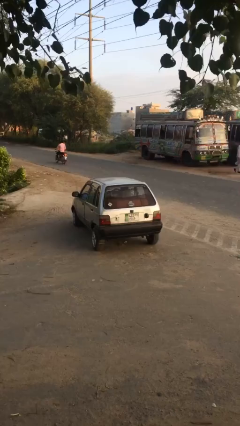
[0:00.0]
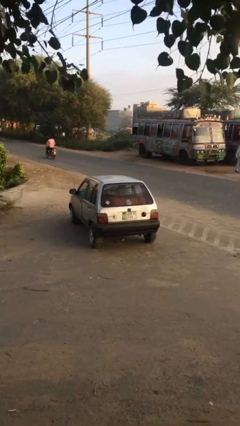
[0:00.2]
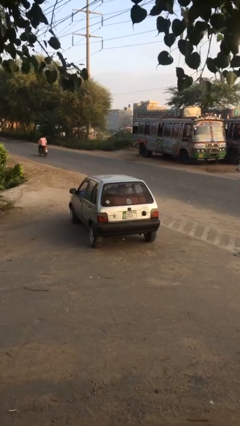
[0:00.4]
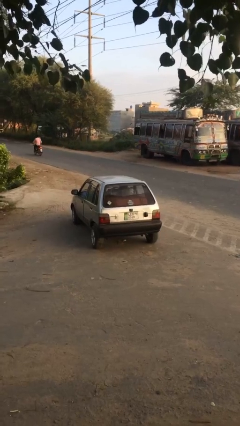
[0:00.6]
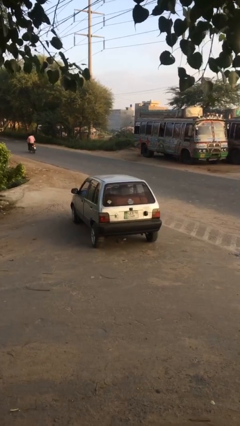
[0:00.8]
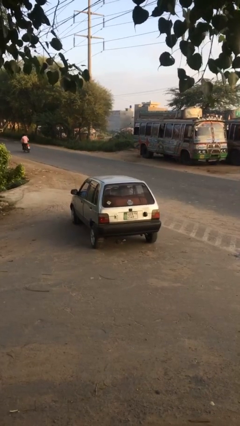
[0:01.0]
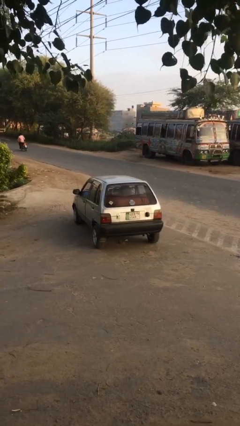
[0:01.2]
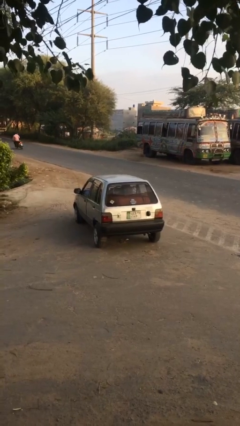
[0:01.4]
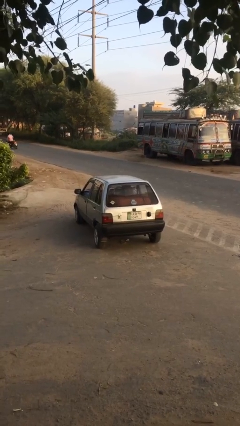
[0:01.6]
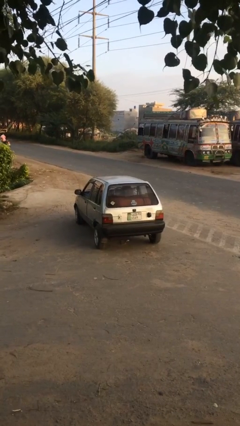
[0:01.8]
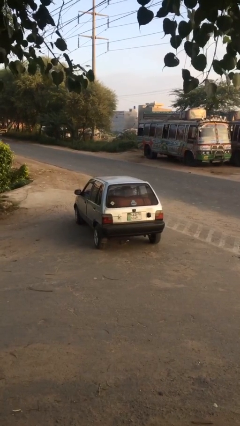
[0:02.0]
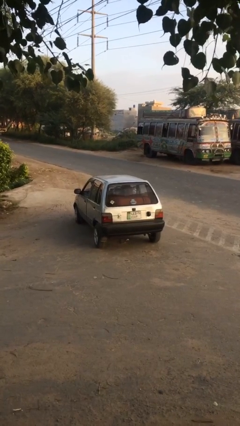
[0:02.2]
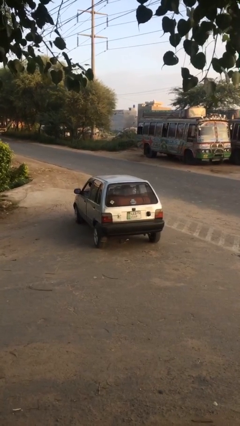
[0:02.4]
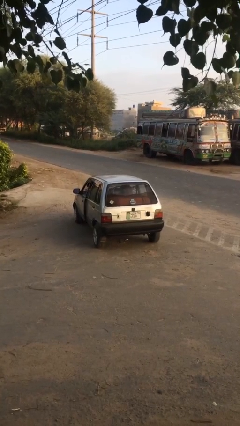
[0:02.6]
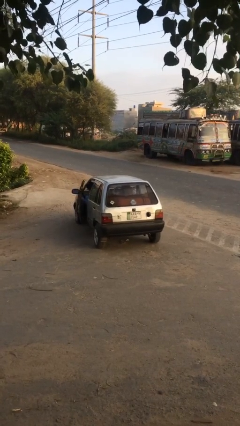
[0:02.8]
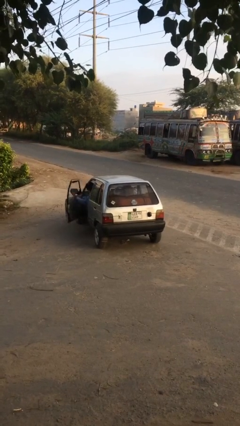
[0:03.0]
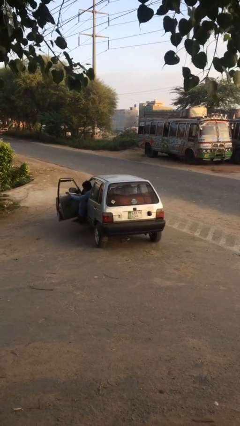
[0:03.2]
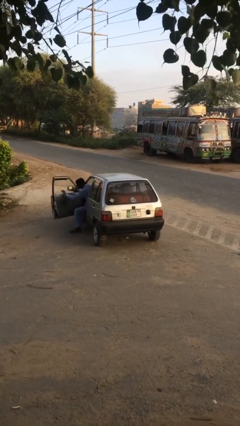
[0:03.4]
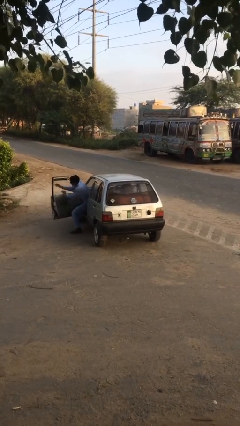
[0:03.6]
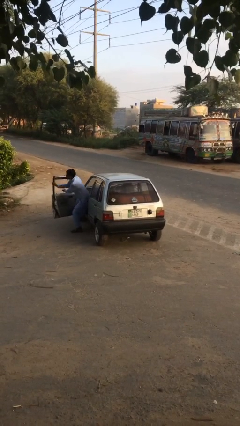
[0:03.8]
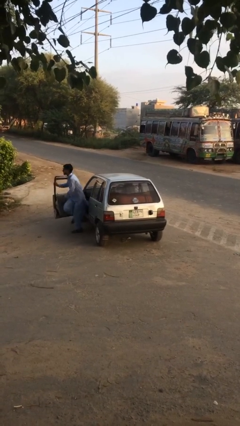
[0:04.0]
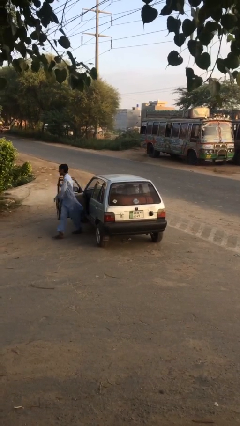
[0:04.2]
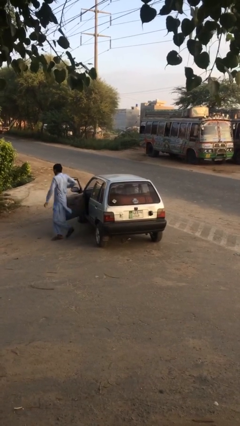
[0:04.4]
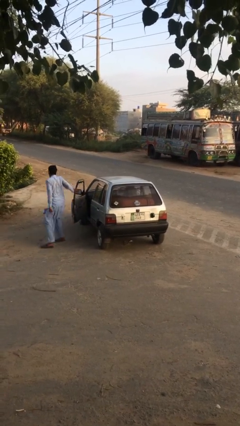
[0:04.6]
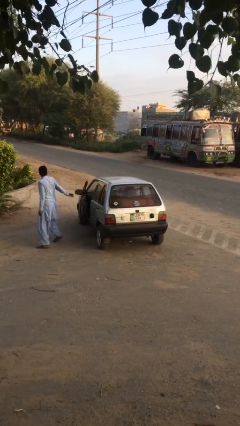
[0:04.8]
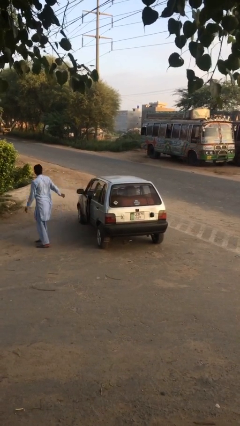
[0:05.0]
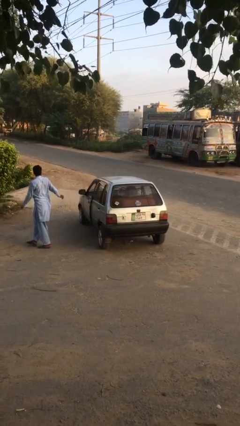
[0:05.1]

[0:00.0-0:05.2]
car drops off person

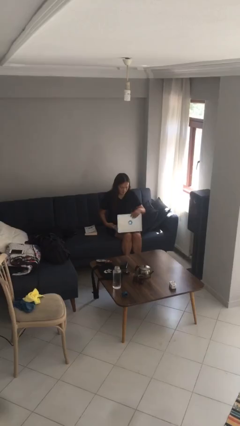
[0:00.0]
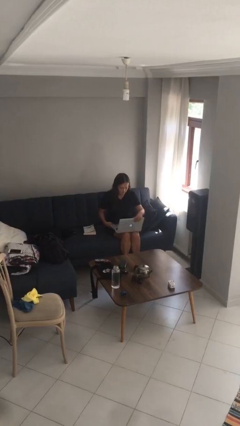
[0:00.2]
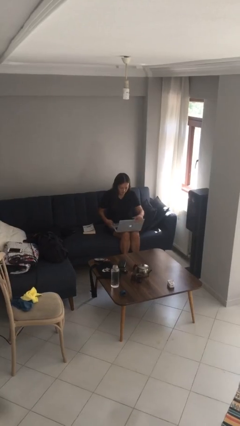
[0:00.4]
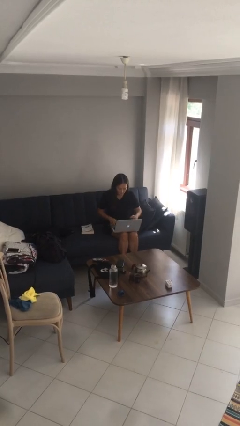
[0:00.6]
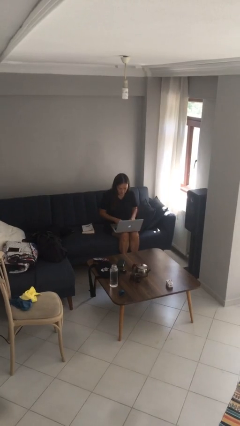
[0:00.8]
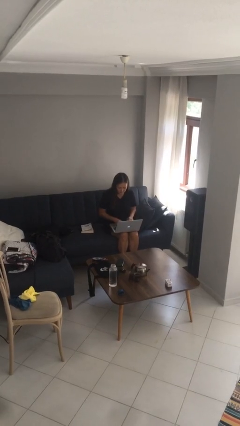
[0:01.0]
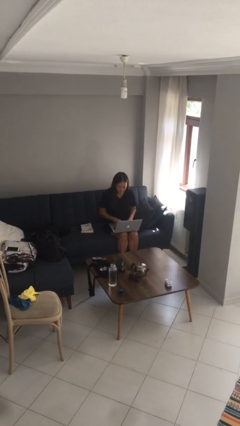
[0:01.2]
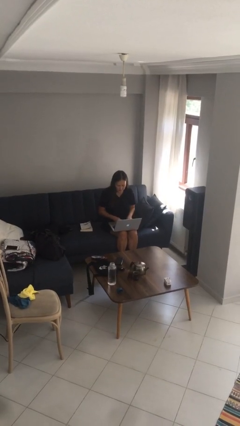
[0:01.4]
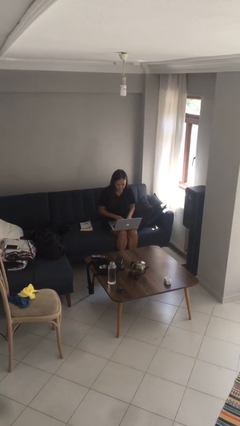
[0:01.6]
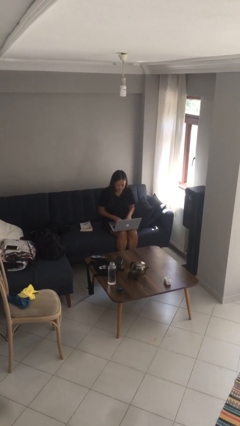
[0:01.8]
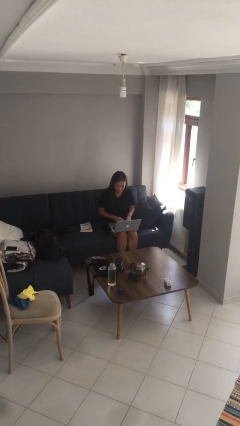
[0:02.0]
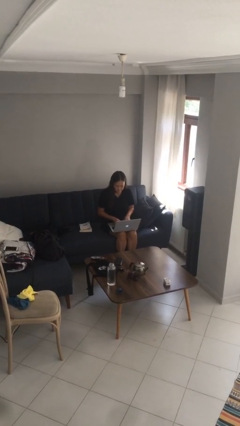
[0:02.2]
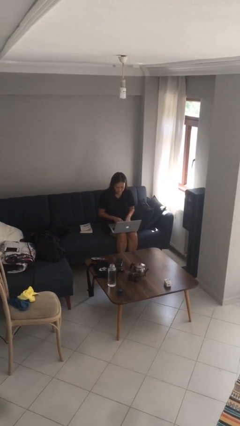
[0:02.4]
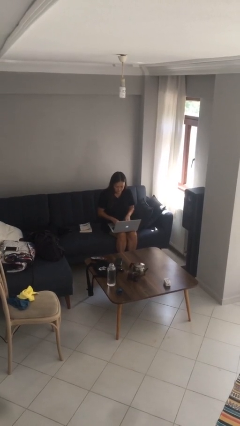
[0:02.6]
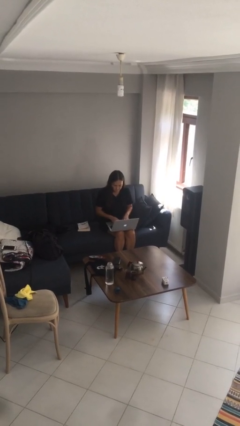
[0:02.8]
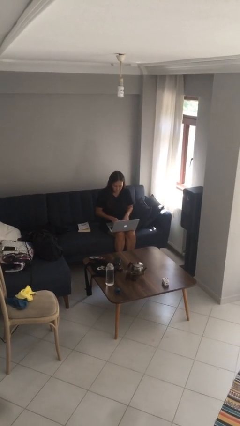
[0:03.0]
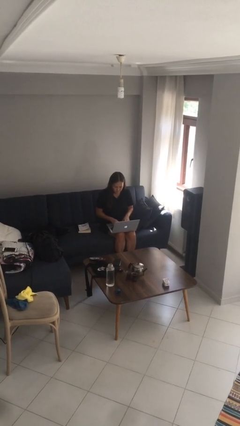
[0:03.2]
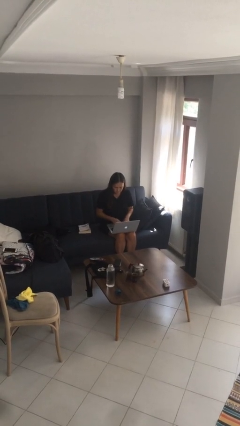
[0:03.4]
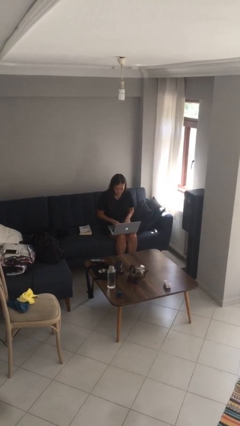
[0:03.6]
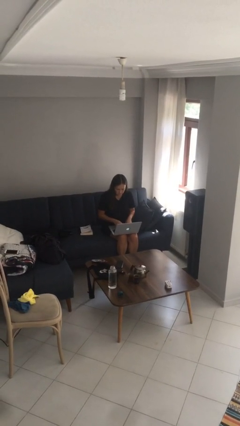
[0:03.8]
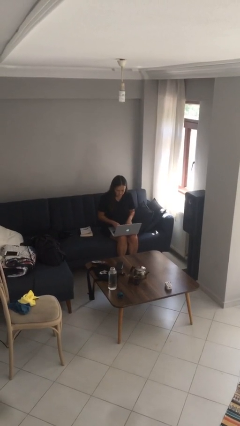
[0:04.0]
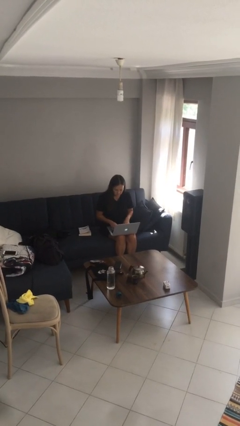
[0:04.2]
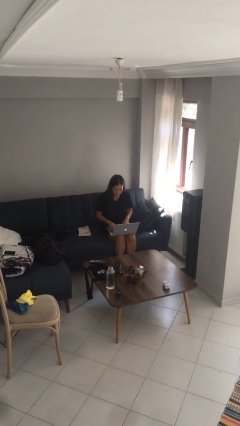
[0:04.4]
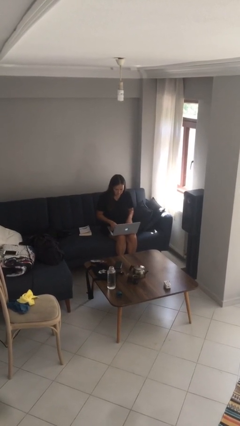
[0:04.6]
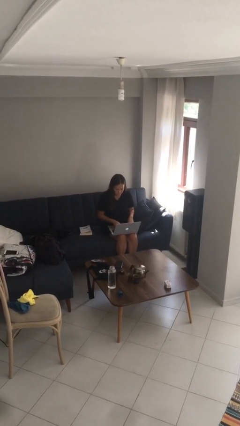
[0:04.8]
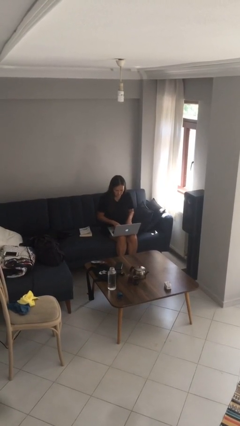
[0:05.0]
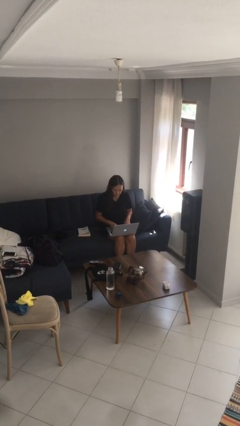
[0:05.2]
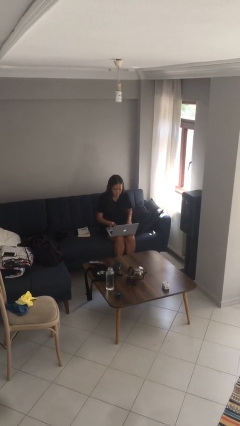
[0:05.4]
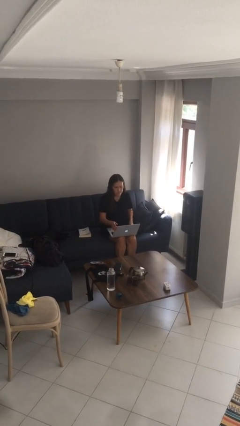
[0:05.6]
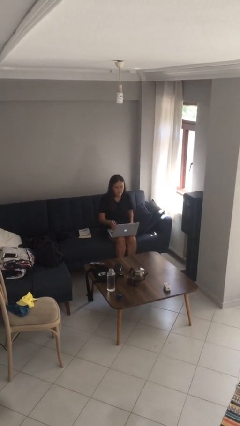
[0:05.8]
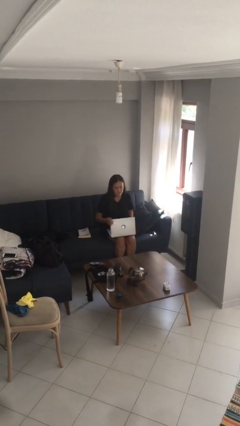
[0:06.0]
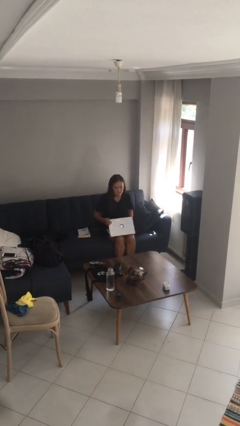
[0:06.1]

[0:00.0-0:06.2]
person interacts with laptop

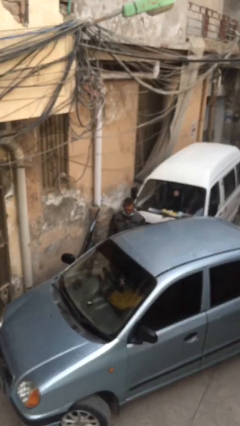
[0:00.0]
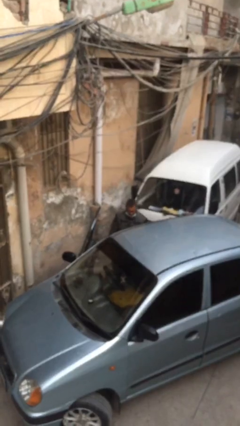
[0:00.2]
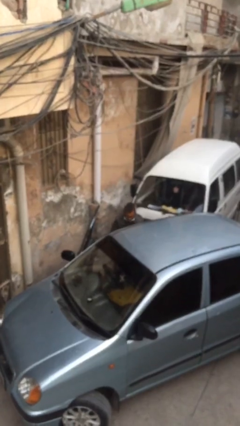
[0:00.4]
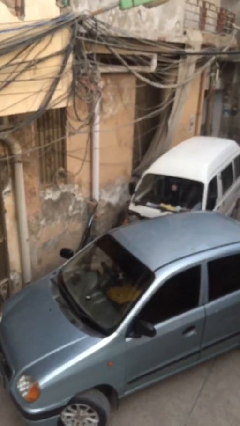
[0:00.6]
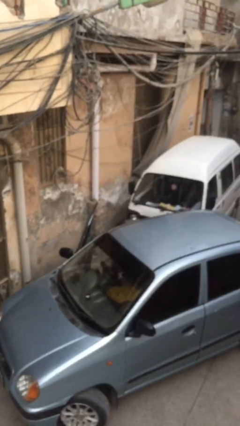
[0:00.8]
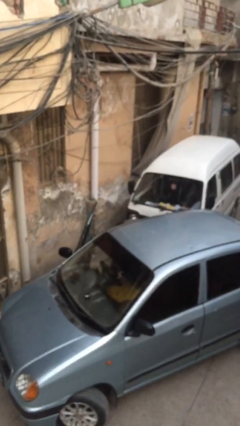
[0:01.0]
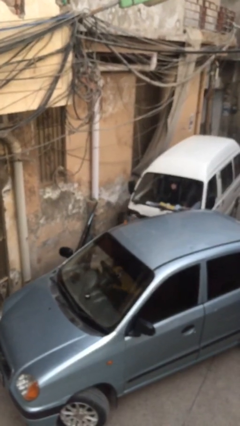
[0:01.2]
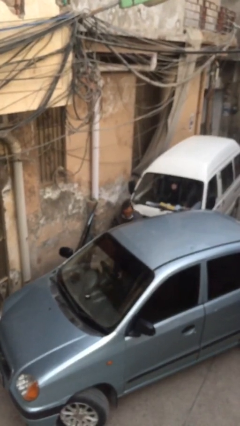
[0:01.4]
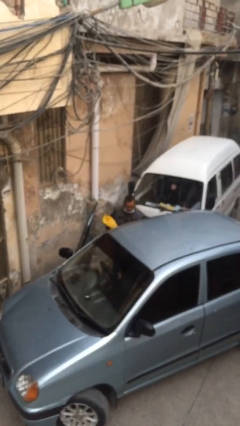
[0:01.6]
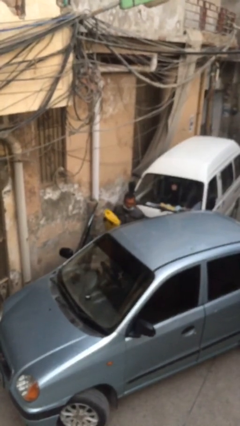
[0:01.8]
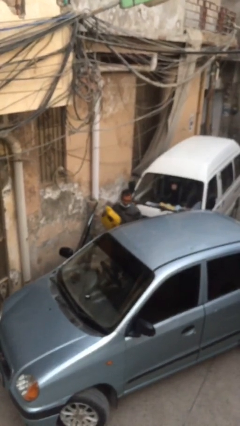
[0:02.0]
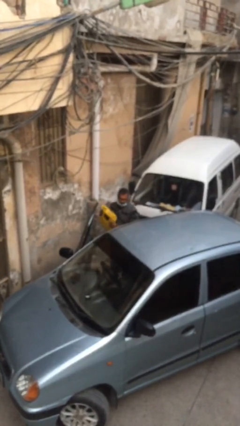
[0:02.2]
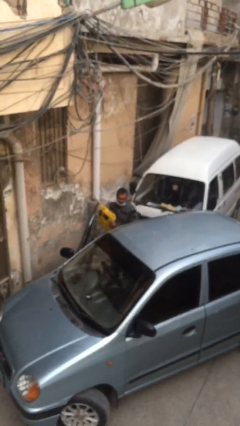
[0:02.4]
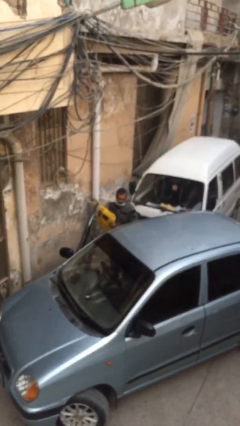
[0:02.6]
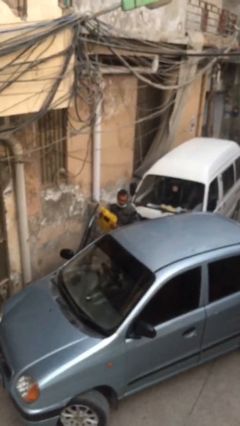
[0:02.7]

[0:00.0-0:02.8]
person unloads car

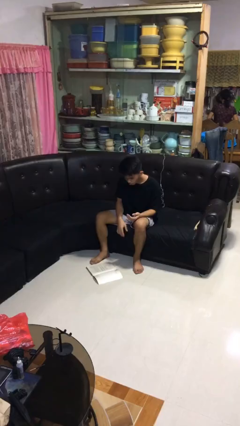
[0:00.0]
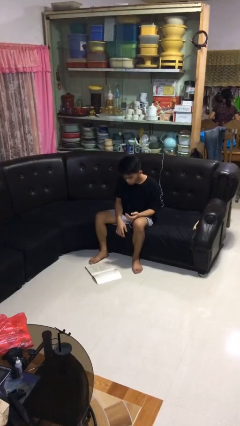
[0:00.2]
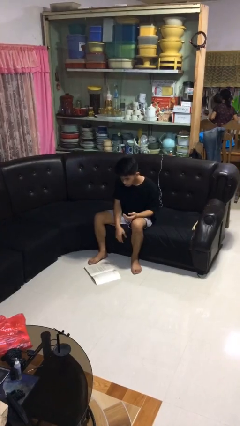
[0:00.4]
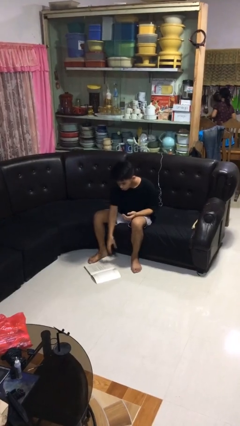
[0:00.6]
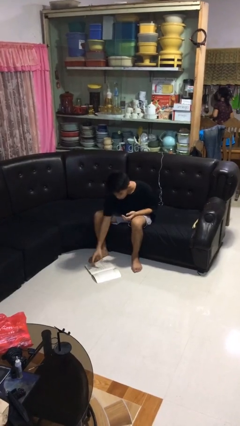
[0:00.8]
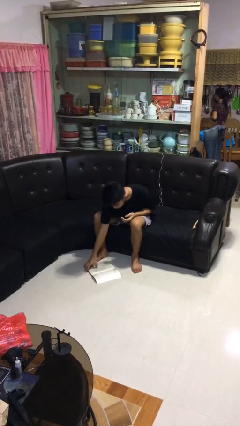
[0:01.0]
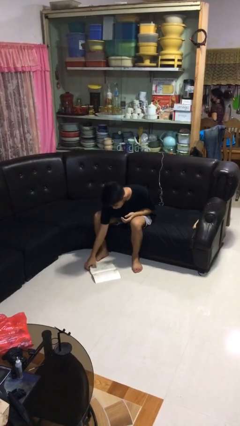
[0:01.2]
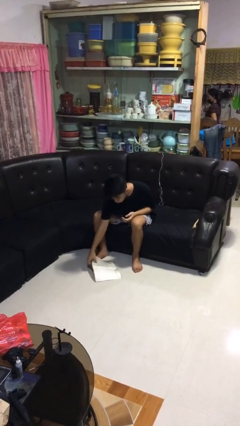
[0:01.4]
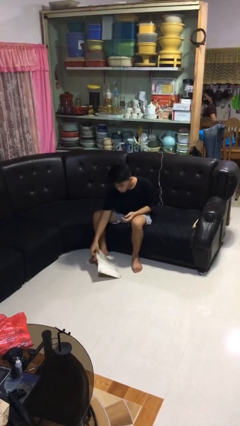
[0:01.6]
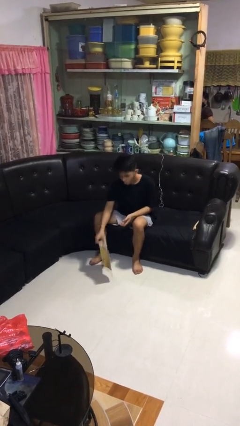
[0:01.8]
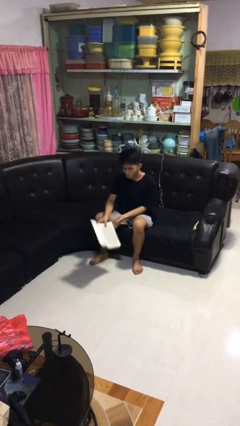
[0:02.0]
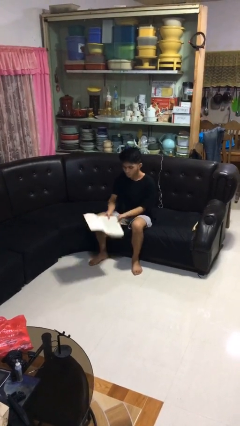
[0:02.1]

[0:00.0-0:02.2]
person picks up object from floor

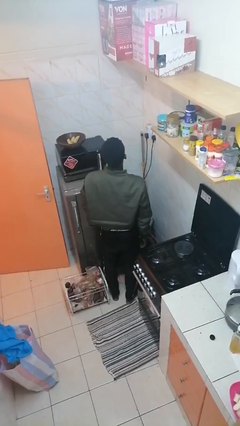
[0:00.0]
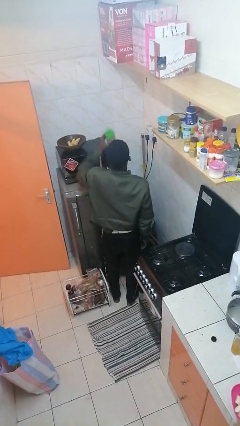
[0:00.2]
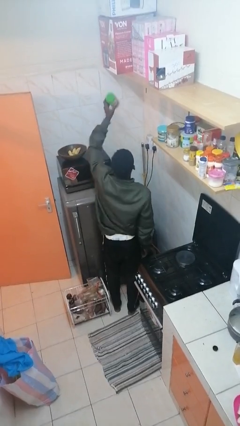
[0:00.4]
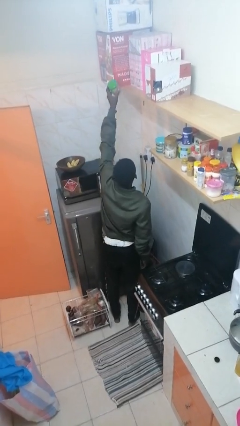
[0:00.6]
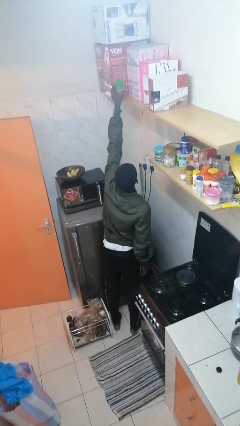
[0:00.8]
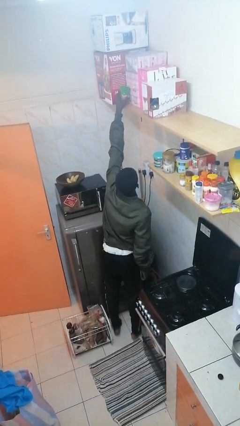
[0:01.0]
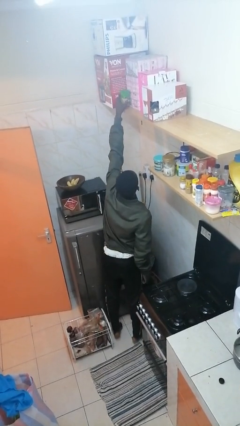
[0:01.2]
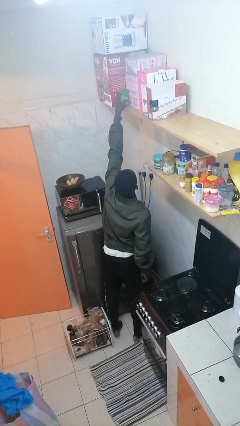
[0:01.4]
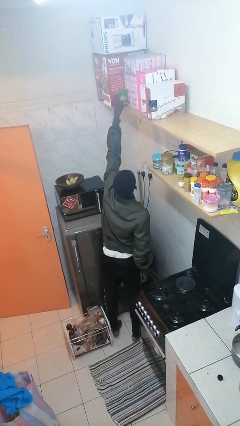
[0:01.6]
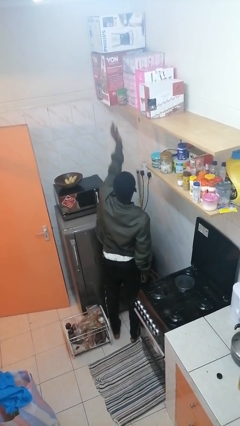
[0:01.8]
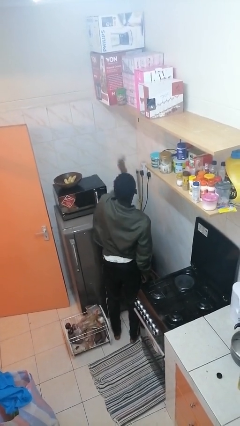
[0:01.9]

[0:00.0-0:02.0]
person puts down object on shelf
